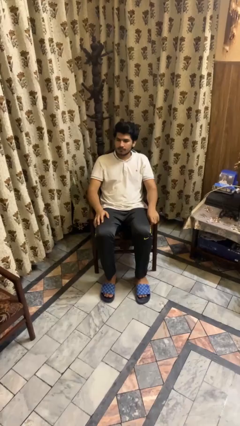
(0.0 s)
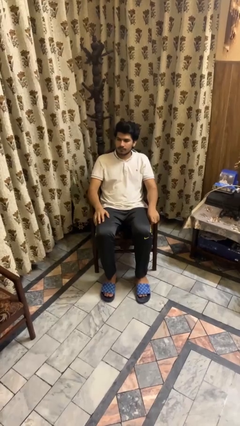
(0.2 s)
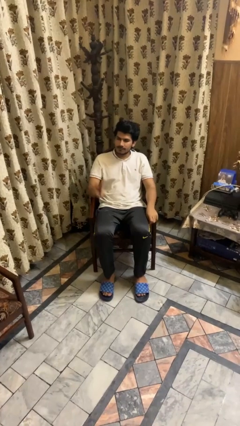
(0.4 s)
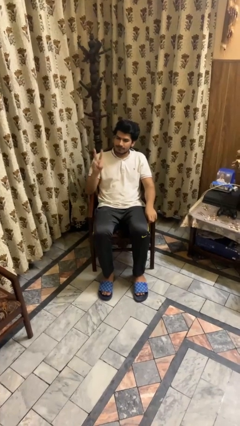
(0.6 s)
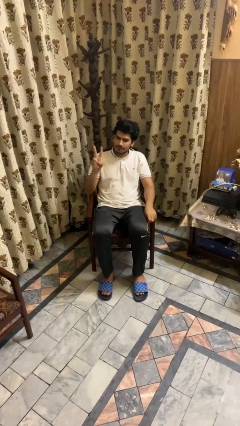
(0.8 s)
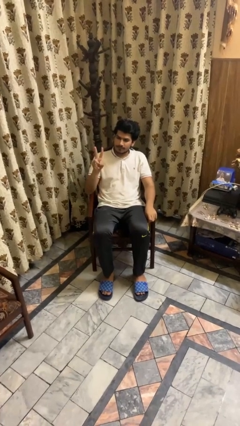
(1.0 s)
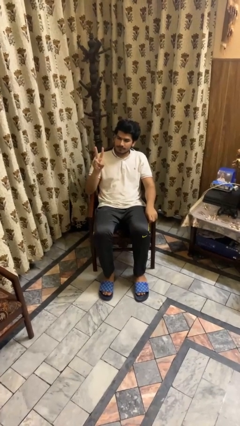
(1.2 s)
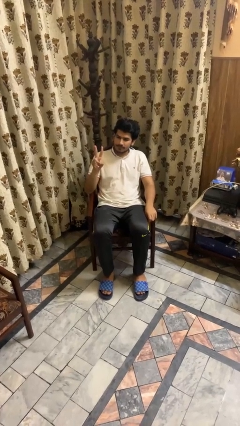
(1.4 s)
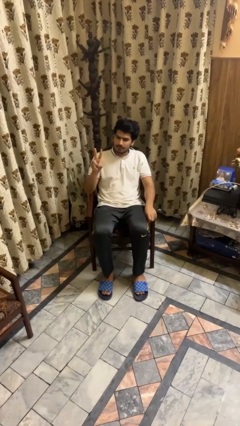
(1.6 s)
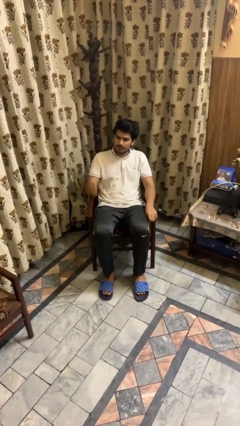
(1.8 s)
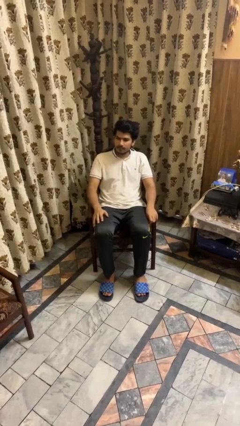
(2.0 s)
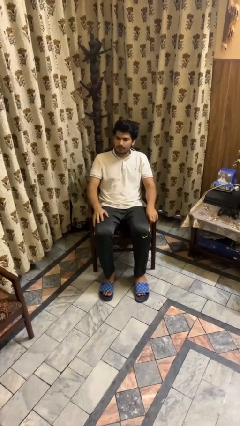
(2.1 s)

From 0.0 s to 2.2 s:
person gestures peace

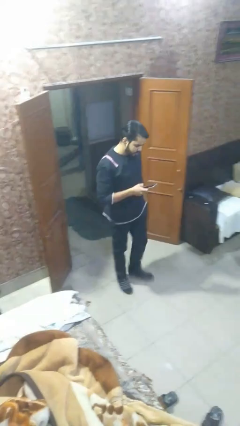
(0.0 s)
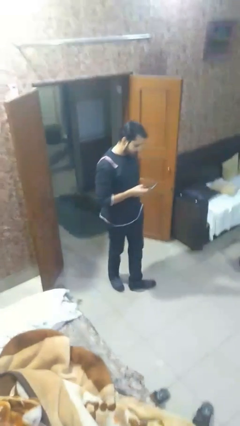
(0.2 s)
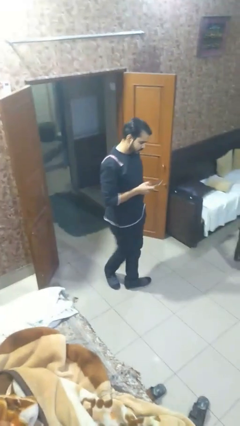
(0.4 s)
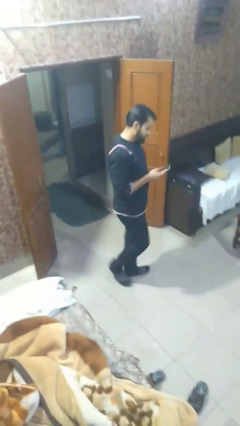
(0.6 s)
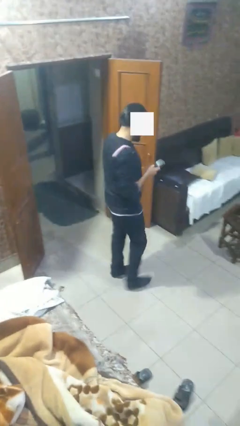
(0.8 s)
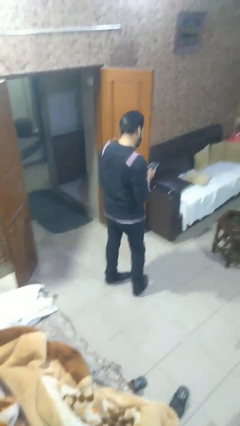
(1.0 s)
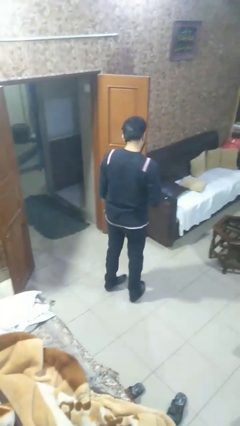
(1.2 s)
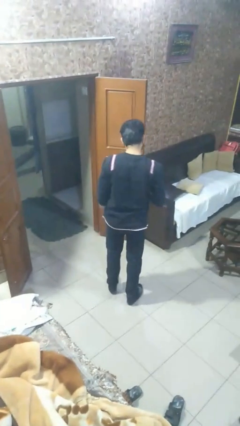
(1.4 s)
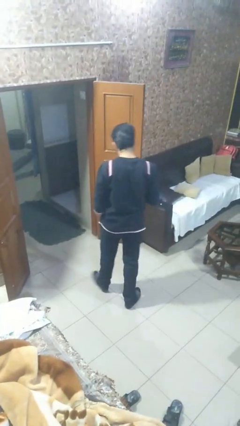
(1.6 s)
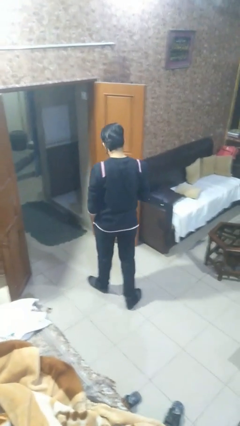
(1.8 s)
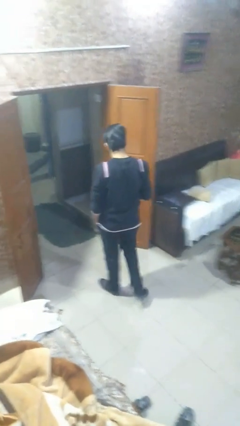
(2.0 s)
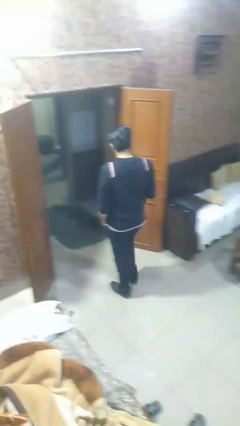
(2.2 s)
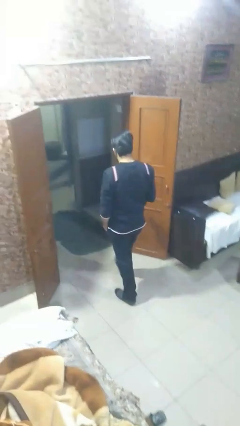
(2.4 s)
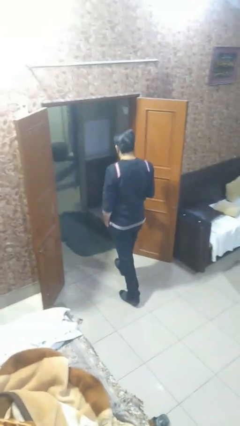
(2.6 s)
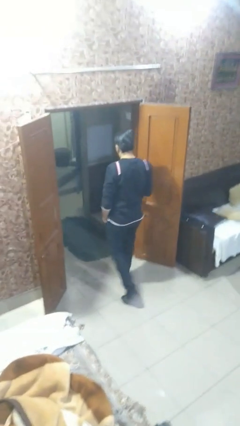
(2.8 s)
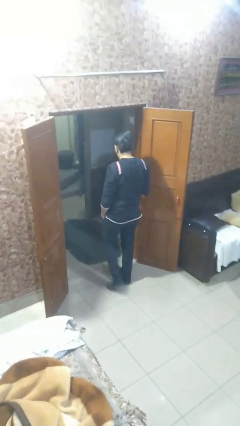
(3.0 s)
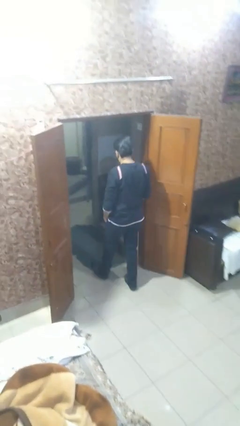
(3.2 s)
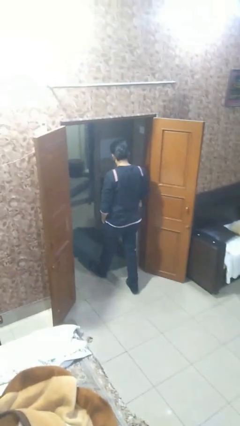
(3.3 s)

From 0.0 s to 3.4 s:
person enters scene through structure

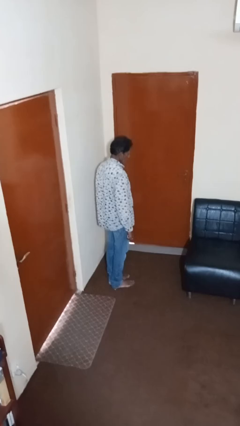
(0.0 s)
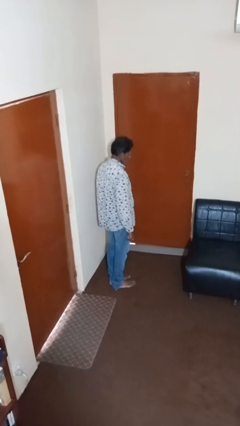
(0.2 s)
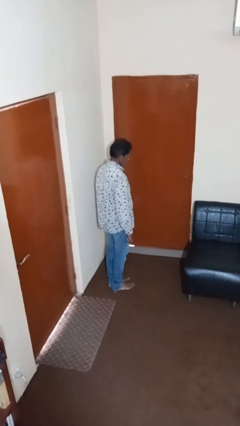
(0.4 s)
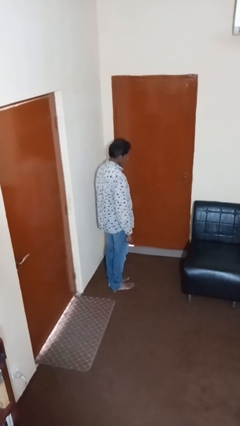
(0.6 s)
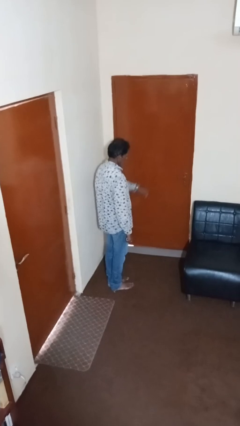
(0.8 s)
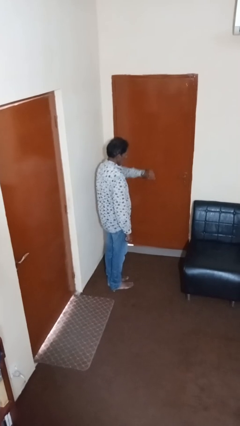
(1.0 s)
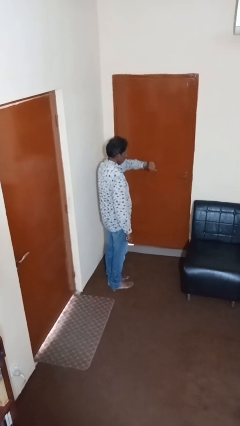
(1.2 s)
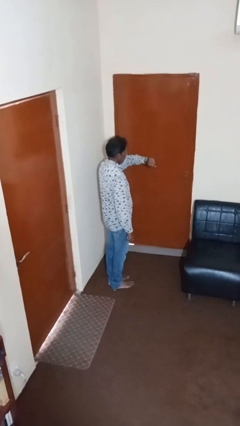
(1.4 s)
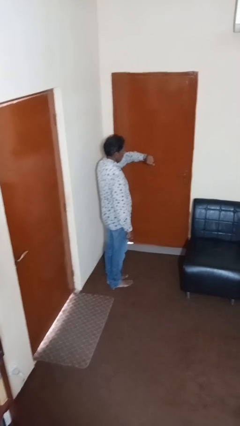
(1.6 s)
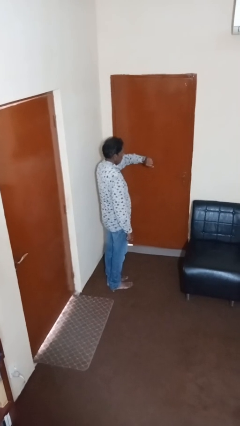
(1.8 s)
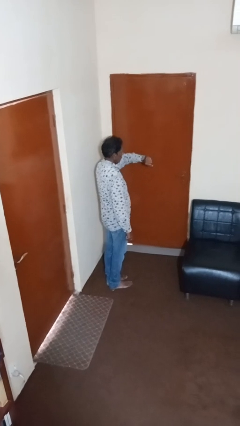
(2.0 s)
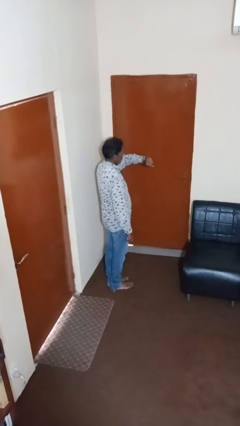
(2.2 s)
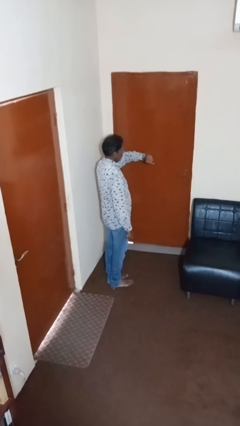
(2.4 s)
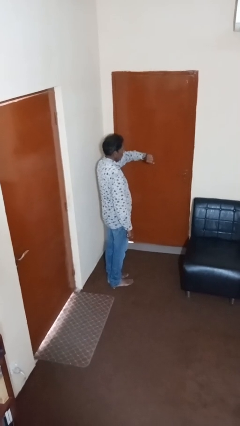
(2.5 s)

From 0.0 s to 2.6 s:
person looks at wristwatch

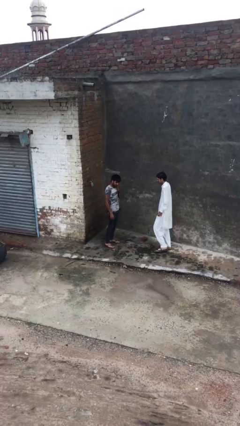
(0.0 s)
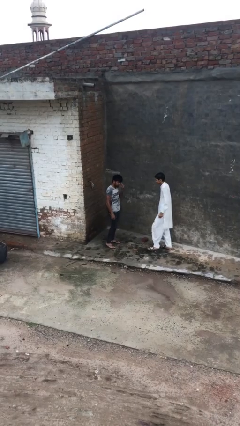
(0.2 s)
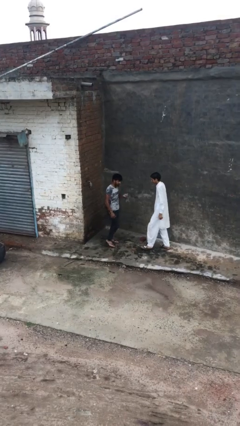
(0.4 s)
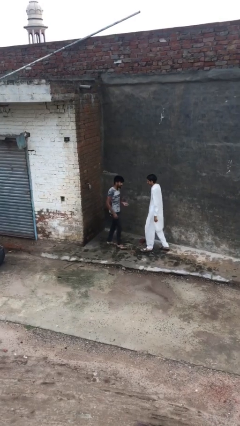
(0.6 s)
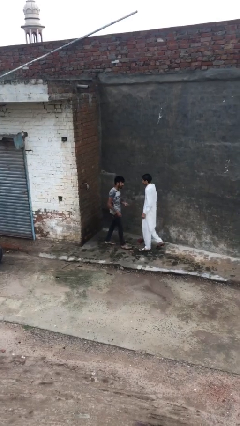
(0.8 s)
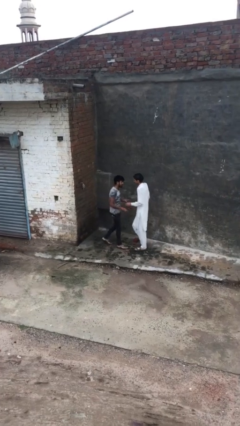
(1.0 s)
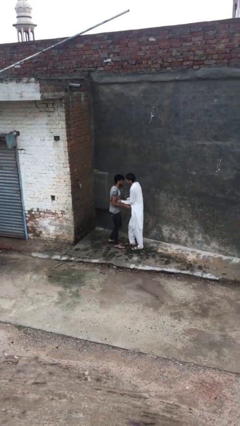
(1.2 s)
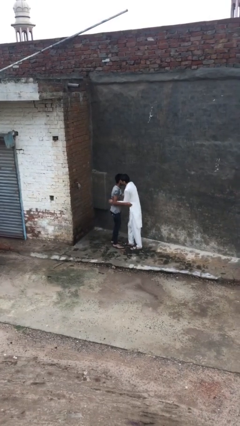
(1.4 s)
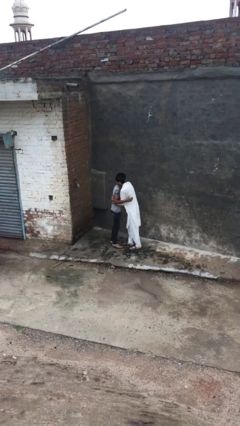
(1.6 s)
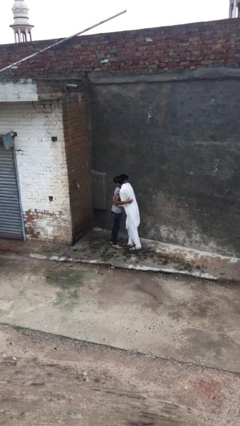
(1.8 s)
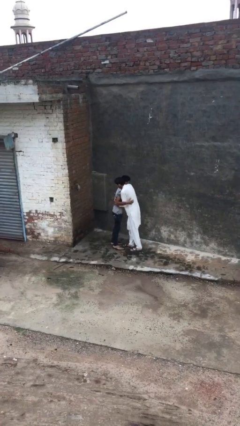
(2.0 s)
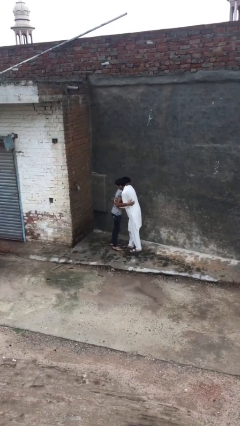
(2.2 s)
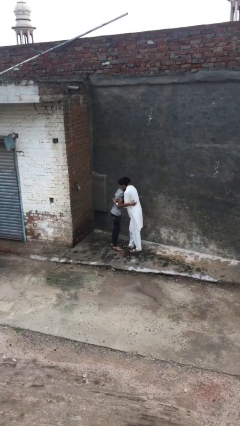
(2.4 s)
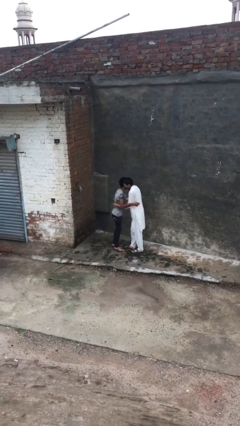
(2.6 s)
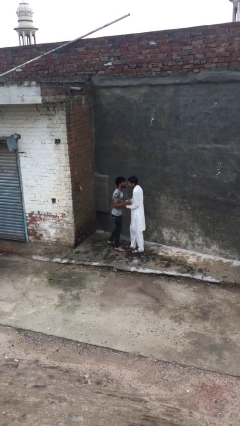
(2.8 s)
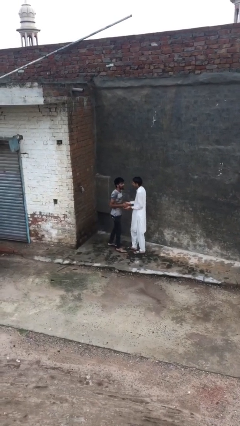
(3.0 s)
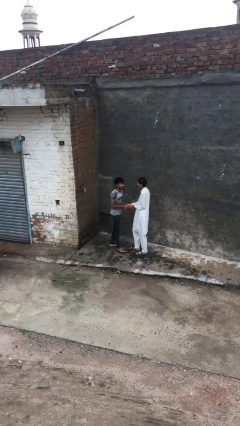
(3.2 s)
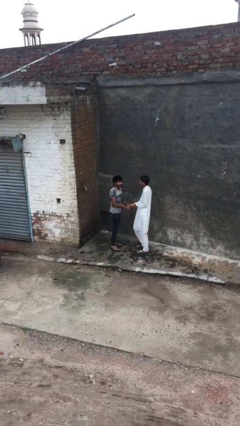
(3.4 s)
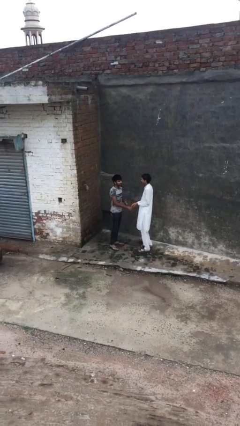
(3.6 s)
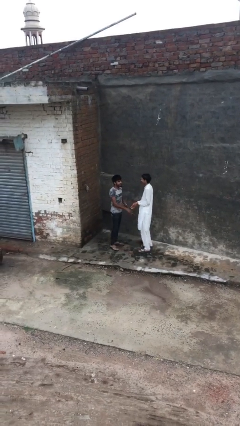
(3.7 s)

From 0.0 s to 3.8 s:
person embraces person

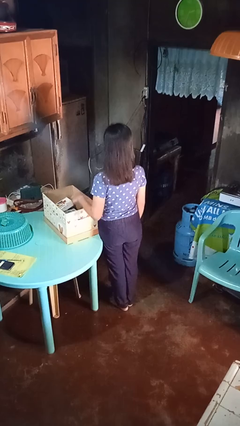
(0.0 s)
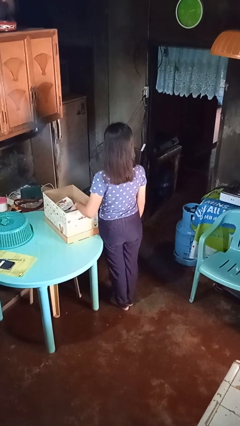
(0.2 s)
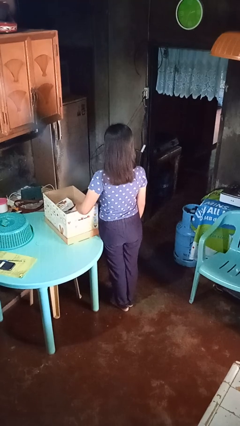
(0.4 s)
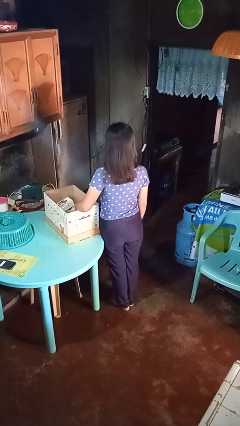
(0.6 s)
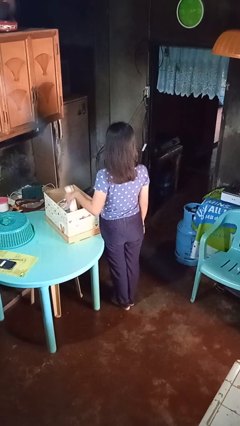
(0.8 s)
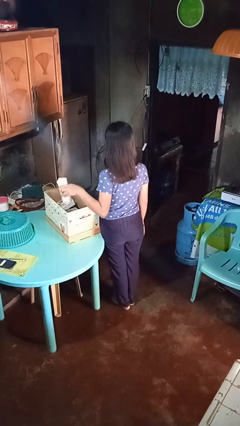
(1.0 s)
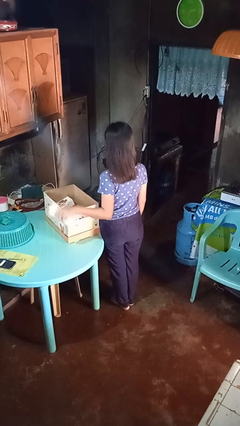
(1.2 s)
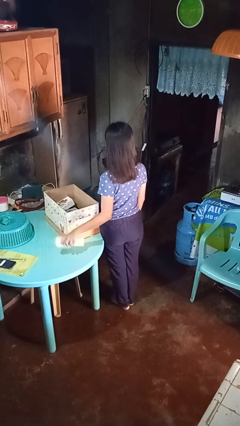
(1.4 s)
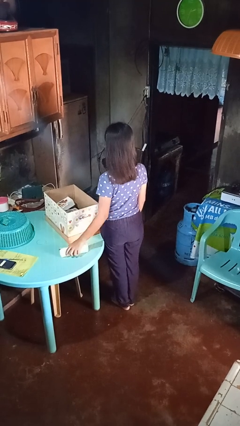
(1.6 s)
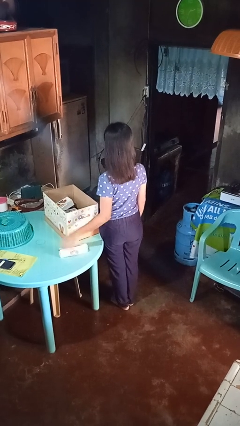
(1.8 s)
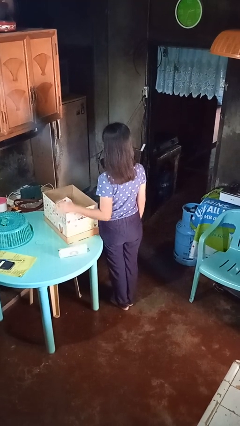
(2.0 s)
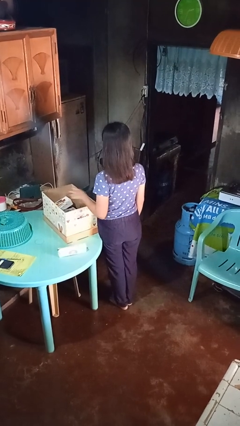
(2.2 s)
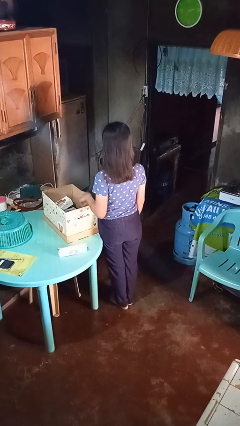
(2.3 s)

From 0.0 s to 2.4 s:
person takes object from box

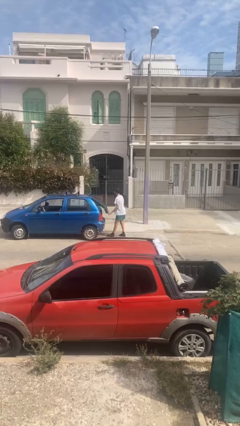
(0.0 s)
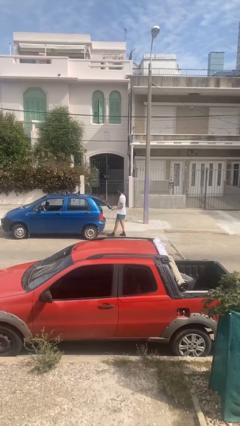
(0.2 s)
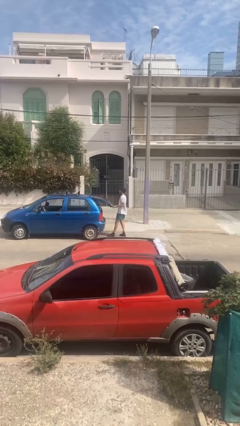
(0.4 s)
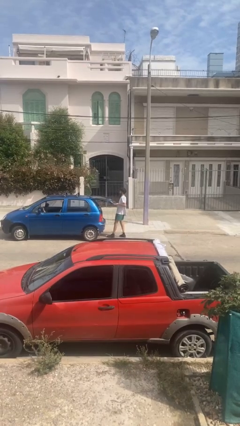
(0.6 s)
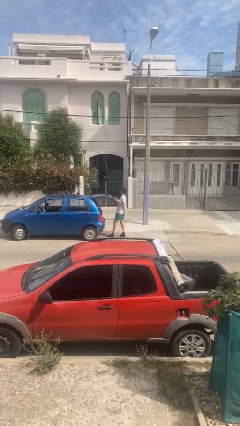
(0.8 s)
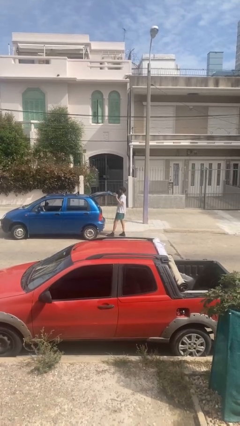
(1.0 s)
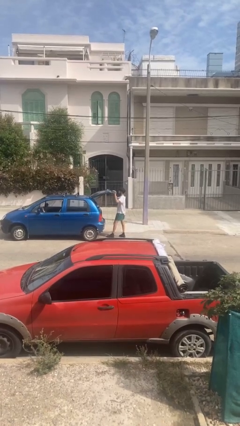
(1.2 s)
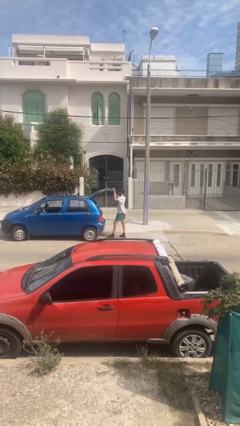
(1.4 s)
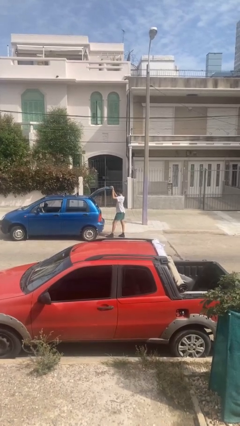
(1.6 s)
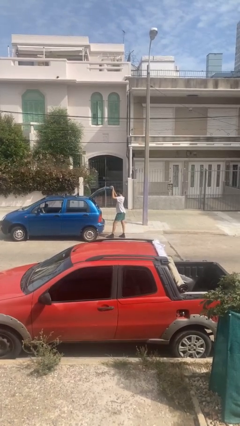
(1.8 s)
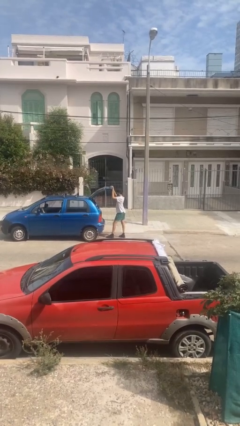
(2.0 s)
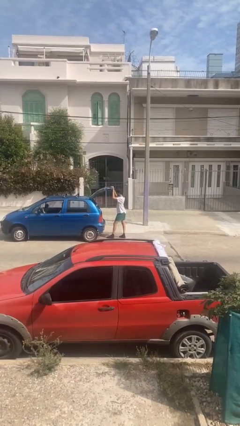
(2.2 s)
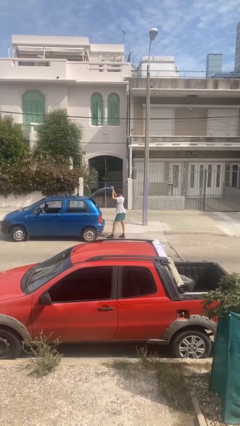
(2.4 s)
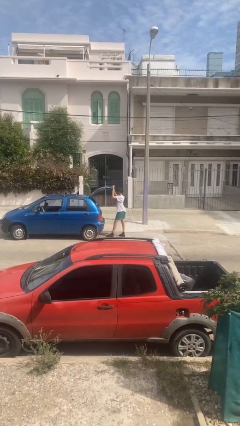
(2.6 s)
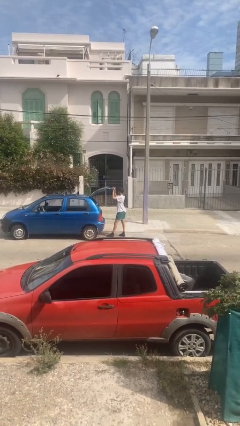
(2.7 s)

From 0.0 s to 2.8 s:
person opens car trunk
